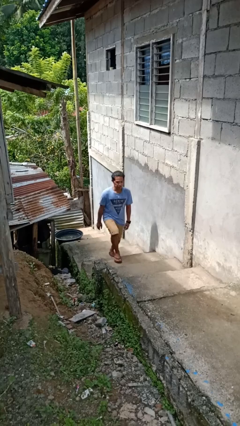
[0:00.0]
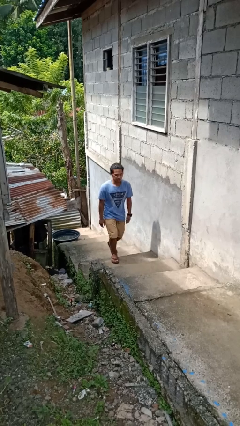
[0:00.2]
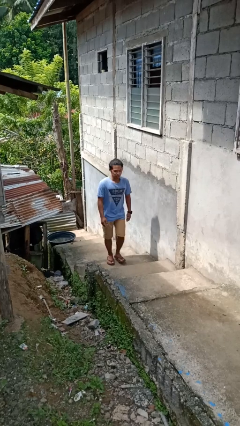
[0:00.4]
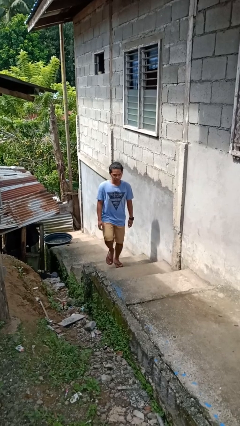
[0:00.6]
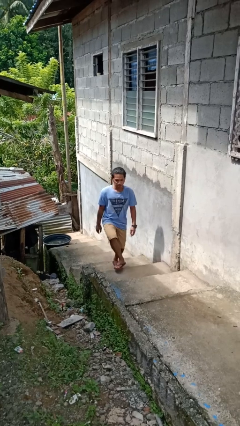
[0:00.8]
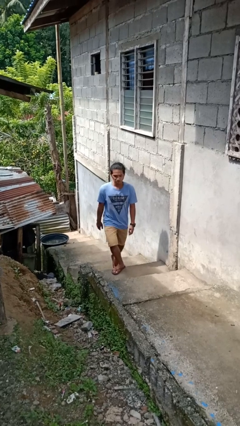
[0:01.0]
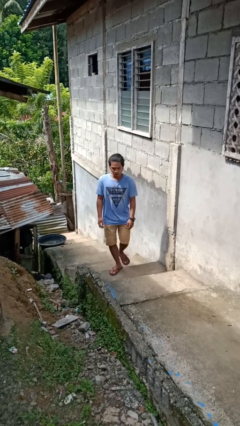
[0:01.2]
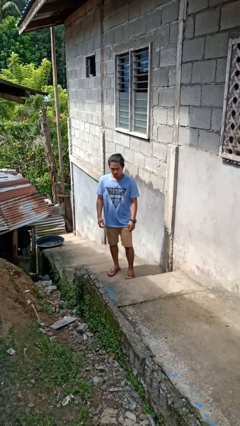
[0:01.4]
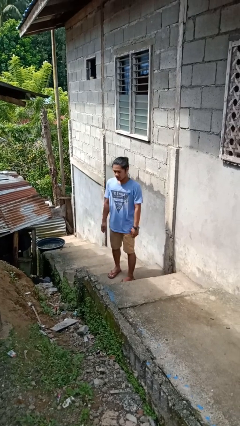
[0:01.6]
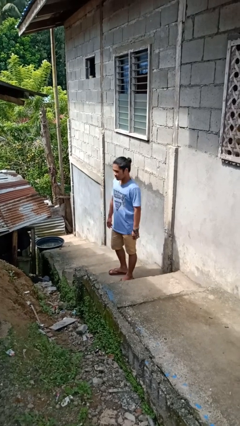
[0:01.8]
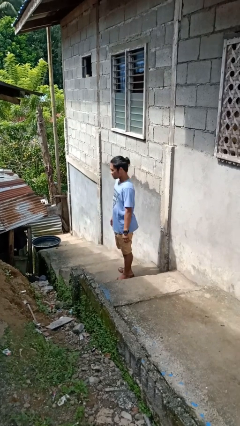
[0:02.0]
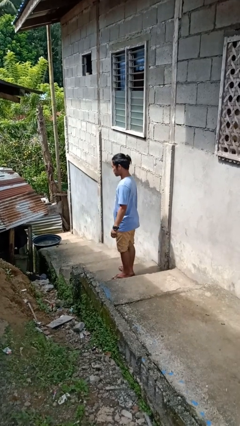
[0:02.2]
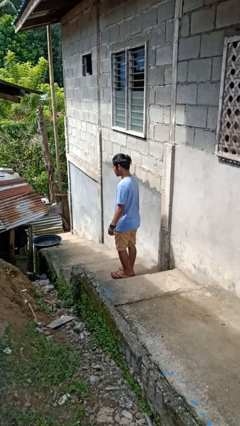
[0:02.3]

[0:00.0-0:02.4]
person climbs up stairs

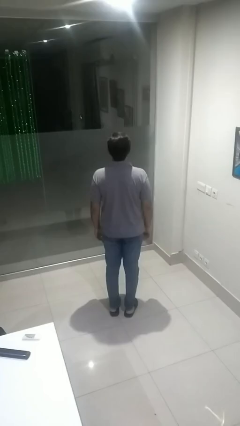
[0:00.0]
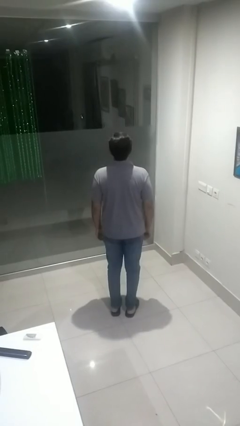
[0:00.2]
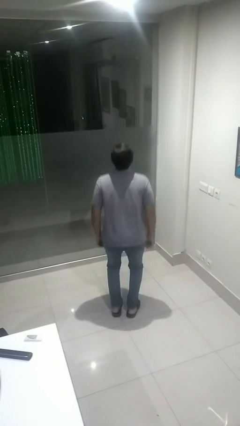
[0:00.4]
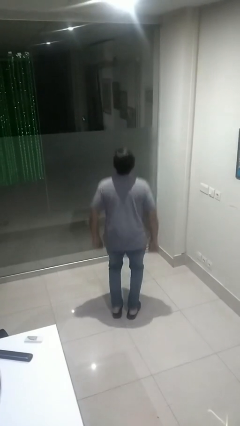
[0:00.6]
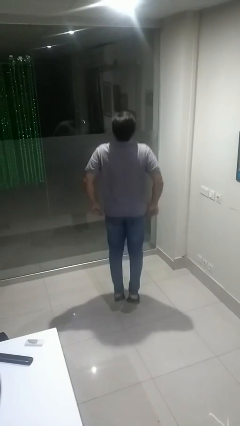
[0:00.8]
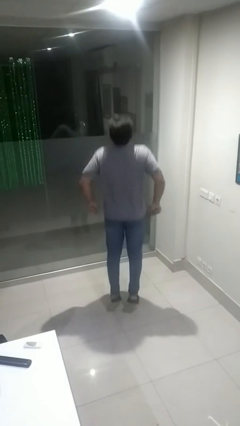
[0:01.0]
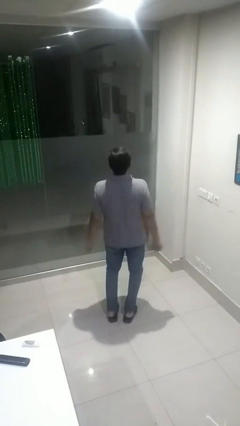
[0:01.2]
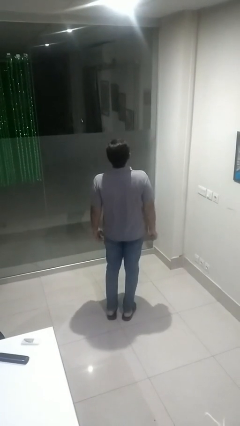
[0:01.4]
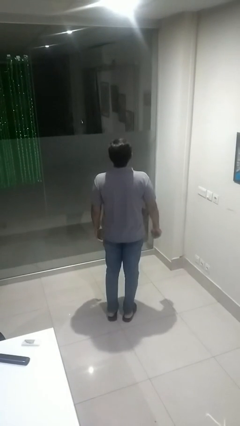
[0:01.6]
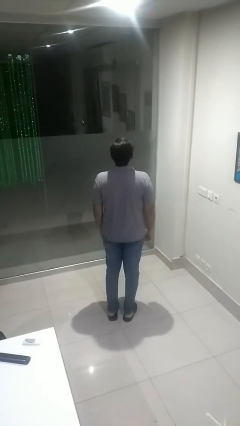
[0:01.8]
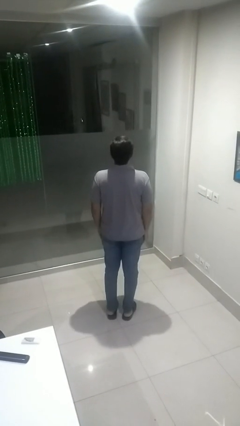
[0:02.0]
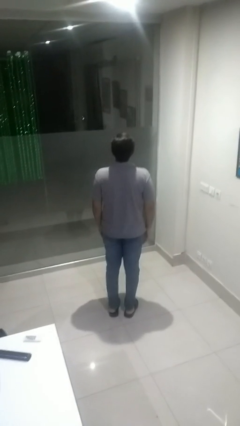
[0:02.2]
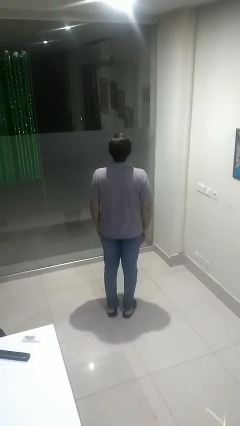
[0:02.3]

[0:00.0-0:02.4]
person jumps

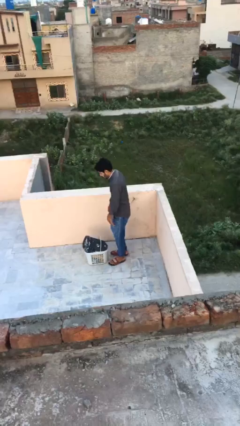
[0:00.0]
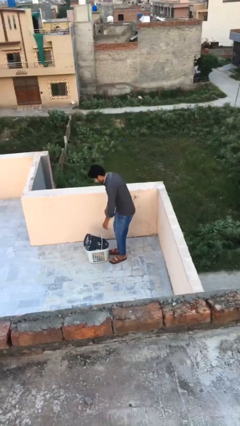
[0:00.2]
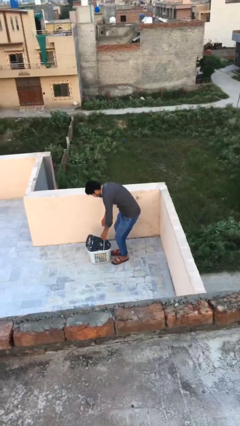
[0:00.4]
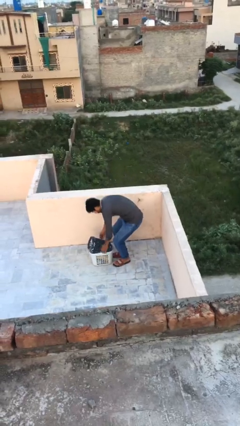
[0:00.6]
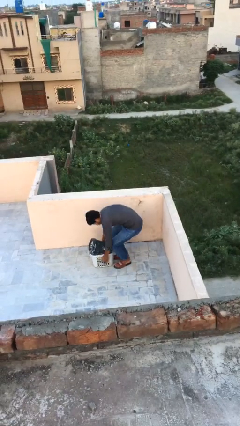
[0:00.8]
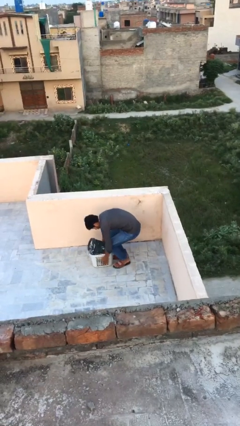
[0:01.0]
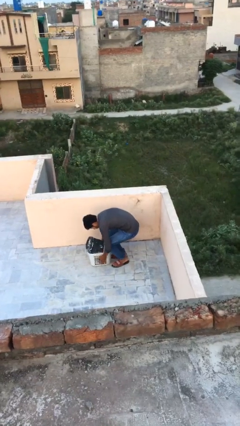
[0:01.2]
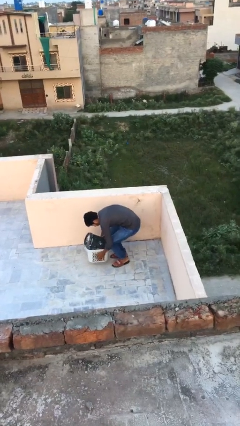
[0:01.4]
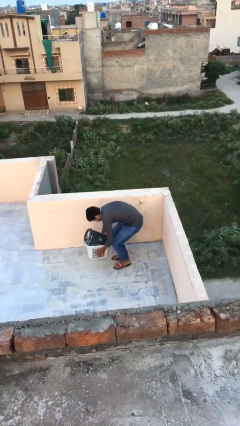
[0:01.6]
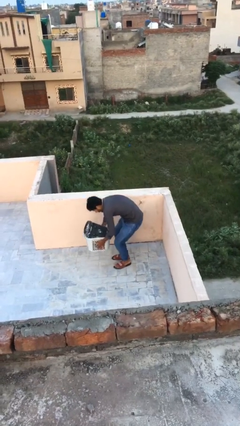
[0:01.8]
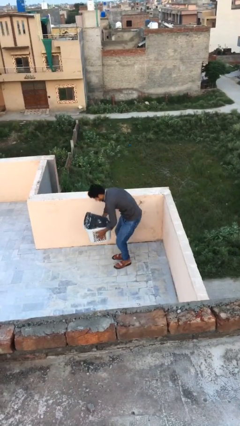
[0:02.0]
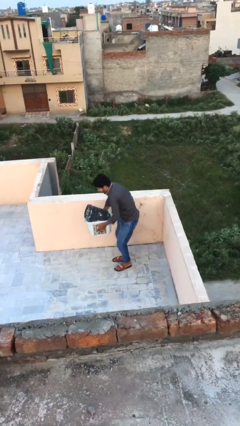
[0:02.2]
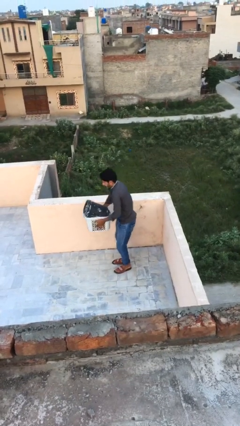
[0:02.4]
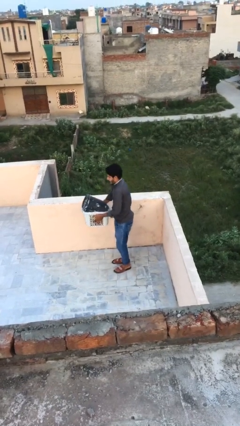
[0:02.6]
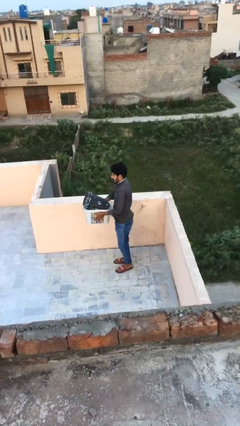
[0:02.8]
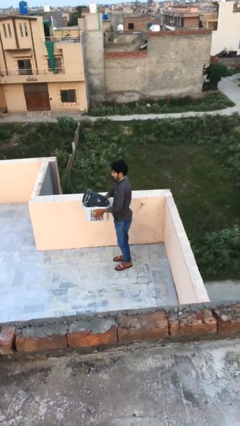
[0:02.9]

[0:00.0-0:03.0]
person picks up object from floor

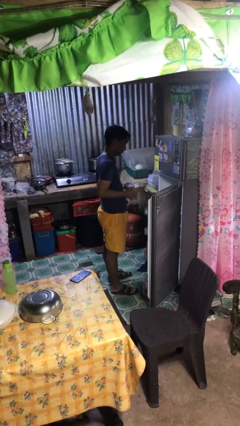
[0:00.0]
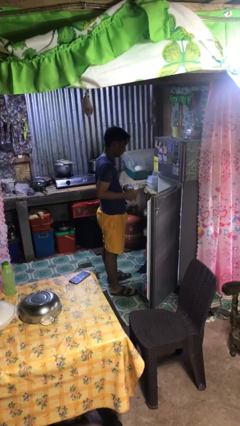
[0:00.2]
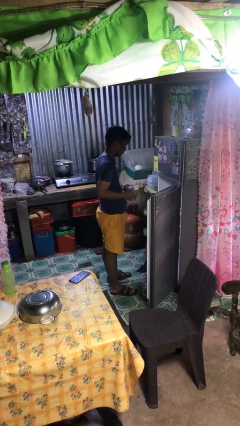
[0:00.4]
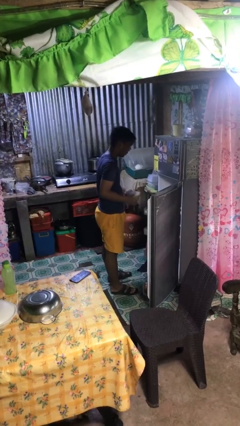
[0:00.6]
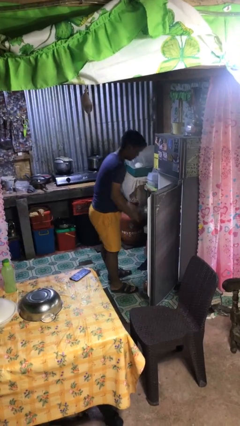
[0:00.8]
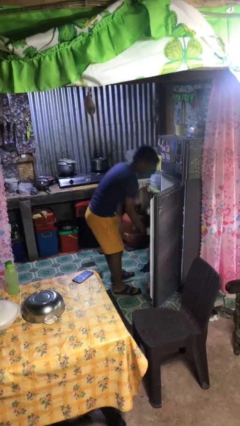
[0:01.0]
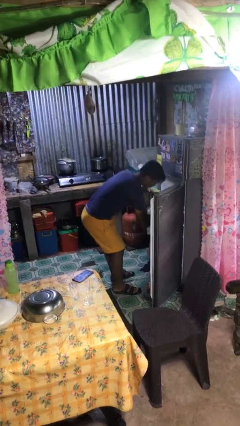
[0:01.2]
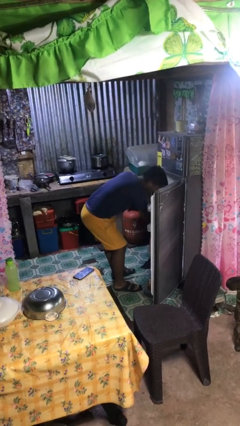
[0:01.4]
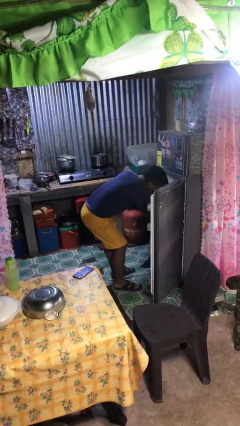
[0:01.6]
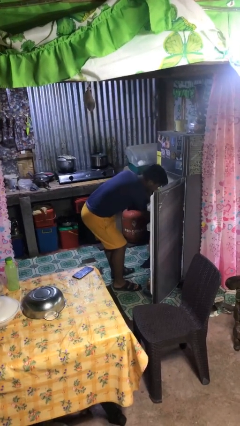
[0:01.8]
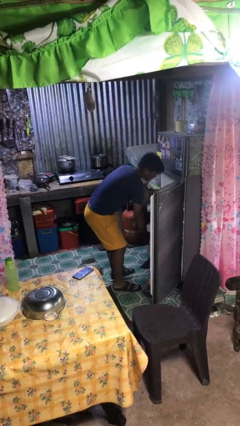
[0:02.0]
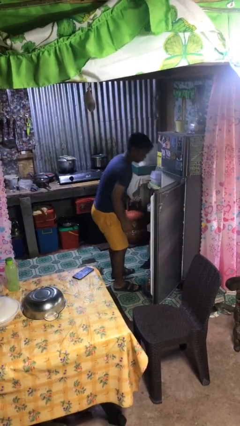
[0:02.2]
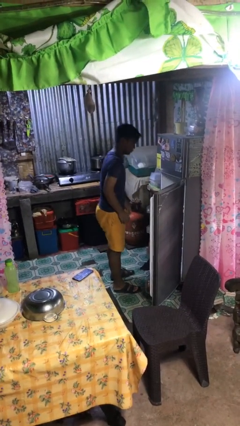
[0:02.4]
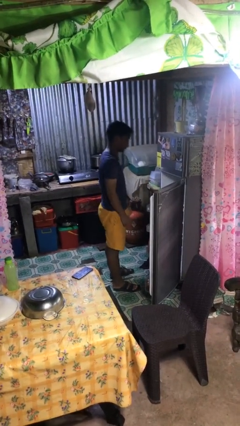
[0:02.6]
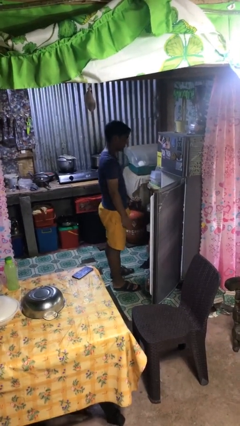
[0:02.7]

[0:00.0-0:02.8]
person takes object from refrigerator

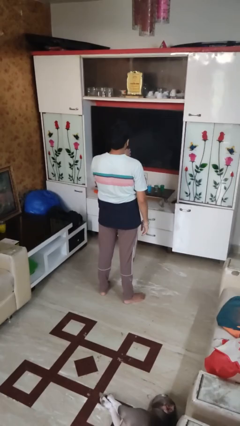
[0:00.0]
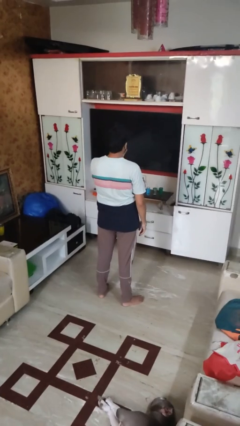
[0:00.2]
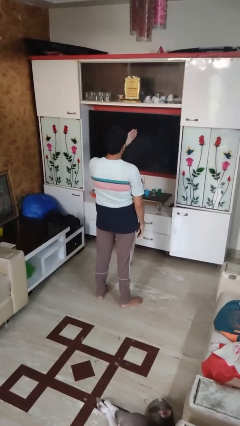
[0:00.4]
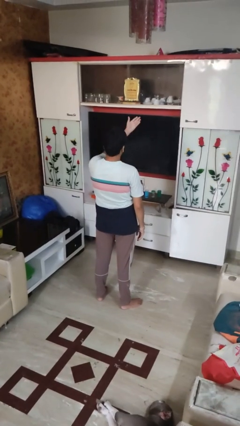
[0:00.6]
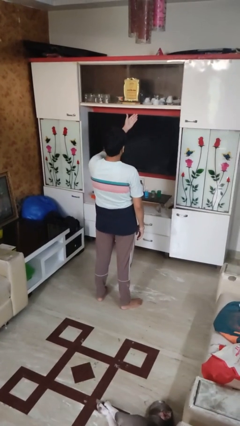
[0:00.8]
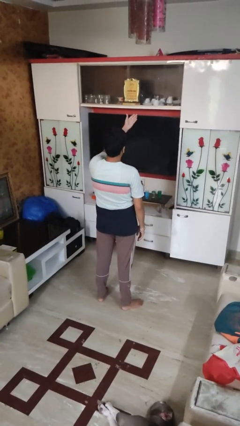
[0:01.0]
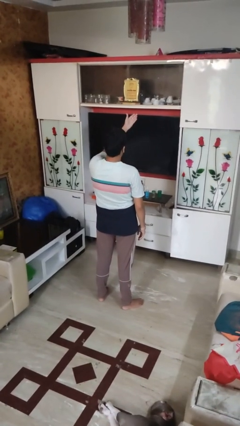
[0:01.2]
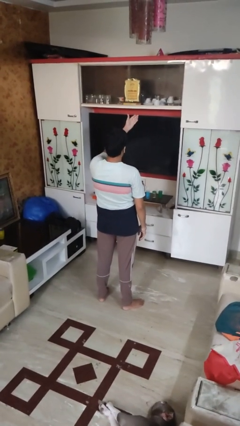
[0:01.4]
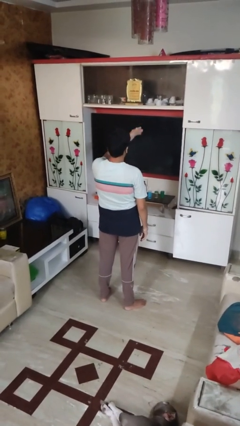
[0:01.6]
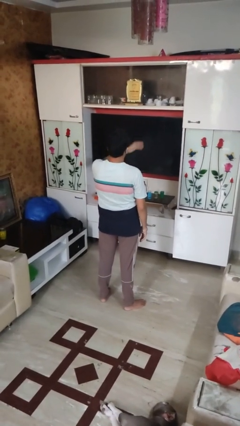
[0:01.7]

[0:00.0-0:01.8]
person gestures blow kiss

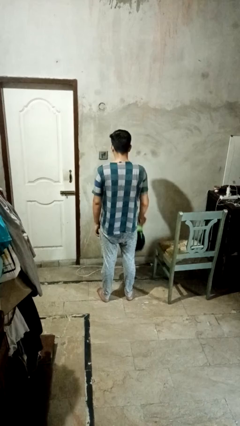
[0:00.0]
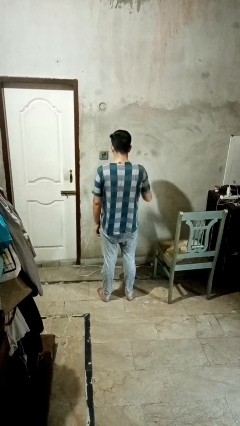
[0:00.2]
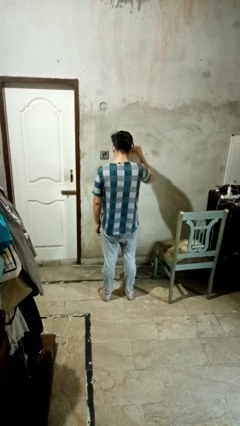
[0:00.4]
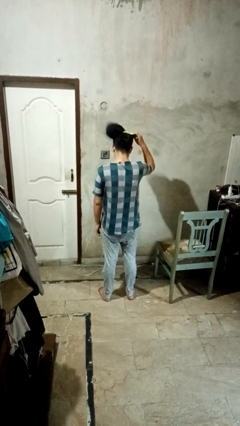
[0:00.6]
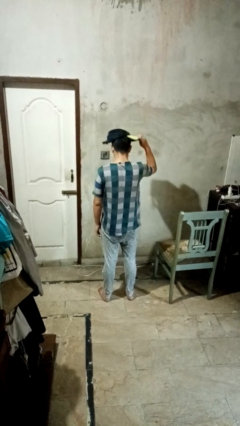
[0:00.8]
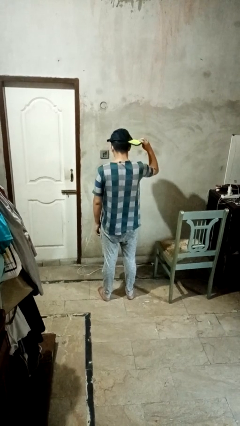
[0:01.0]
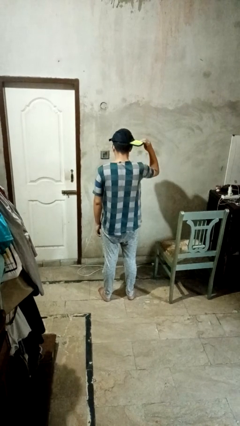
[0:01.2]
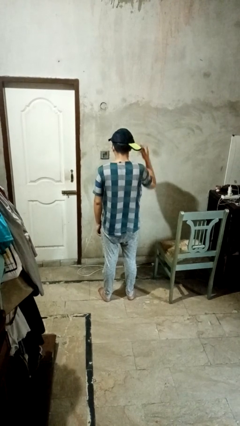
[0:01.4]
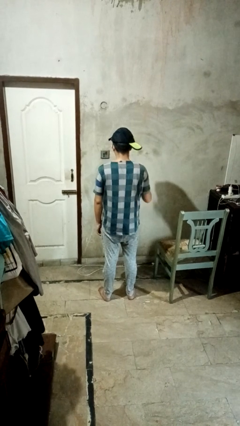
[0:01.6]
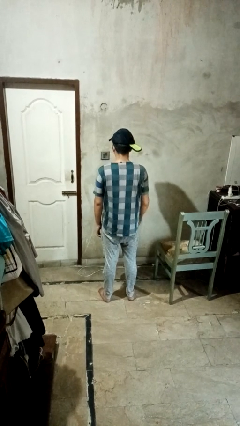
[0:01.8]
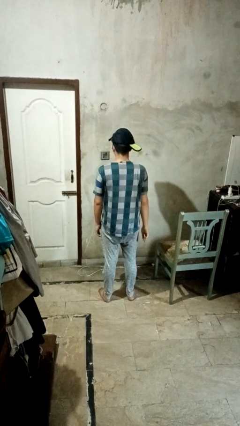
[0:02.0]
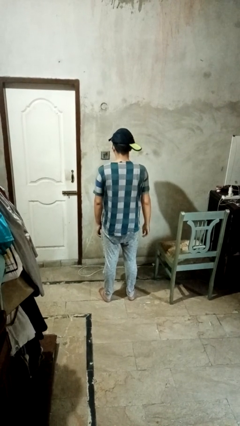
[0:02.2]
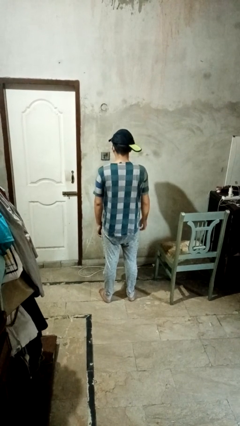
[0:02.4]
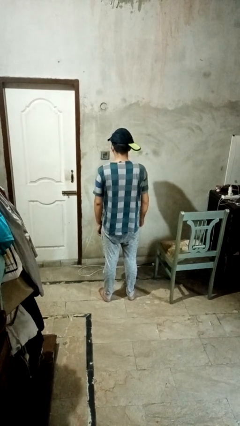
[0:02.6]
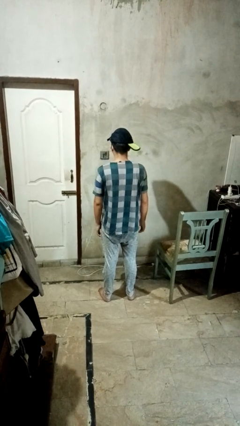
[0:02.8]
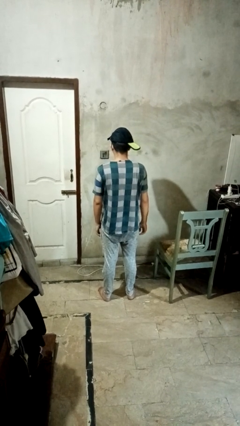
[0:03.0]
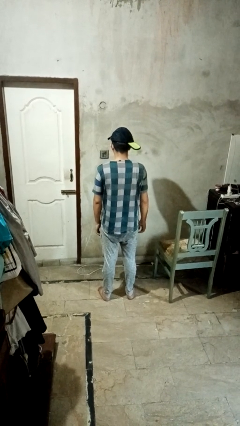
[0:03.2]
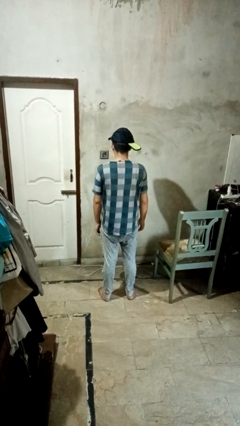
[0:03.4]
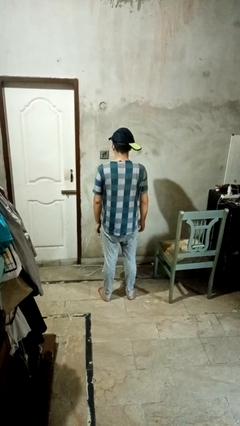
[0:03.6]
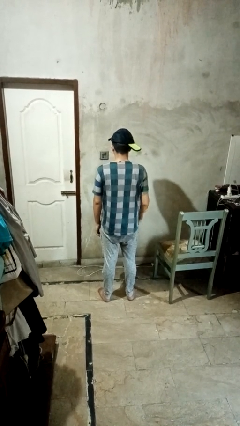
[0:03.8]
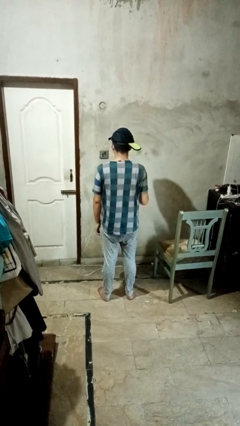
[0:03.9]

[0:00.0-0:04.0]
person puts on hat

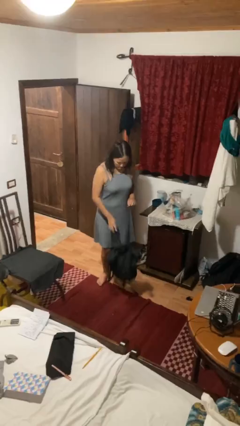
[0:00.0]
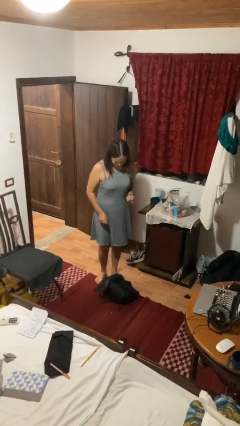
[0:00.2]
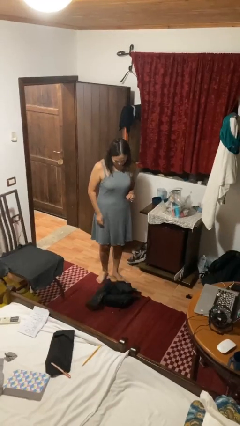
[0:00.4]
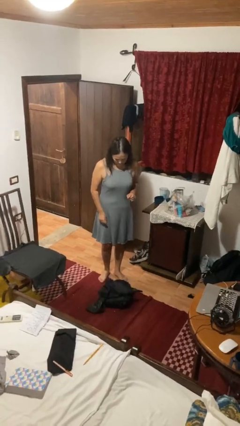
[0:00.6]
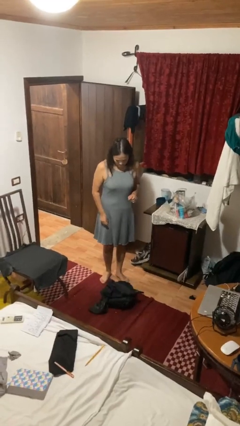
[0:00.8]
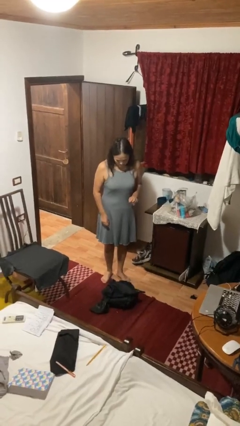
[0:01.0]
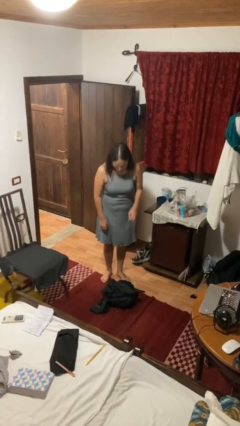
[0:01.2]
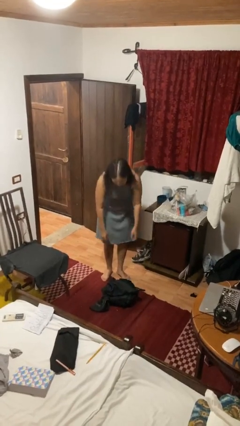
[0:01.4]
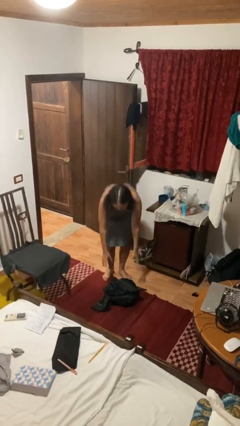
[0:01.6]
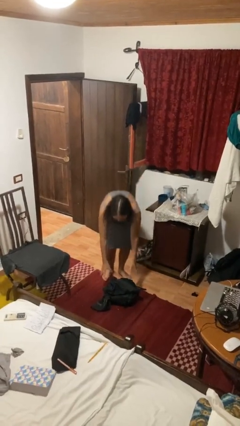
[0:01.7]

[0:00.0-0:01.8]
person drops object
